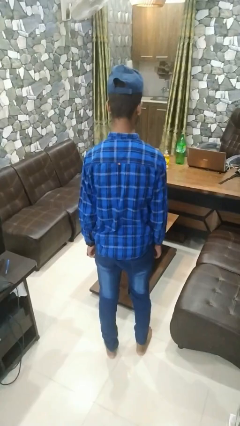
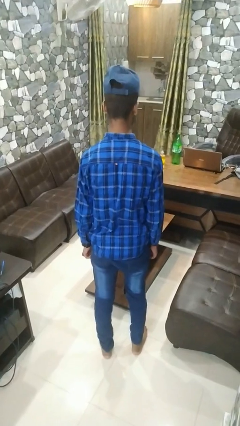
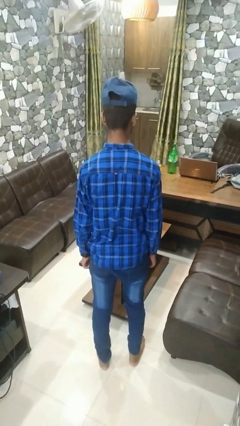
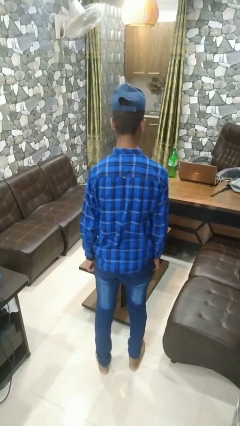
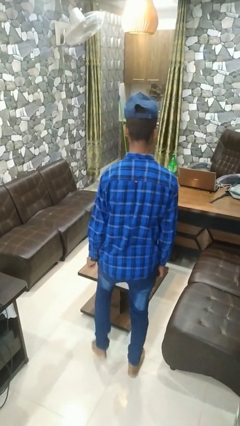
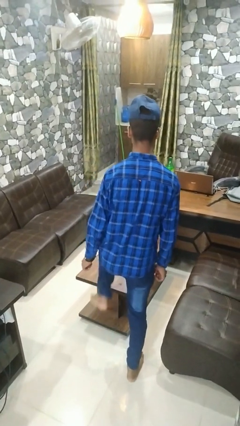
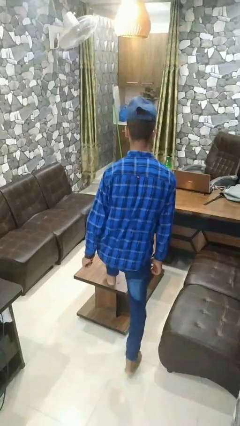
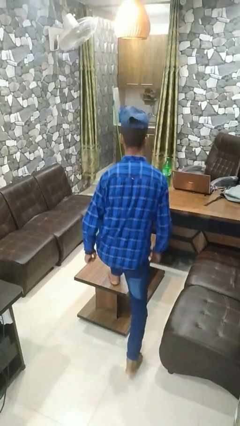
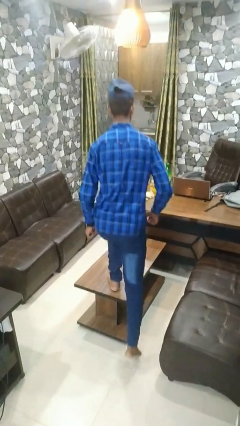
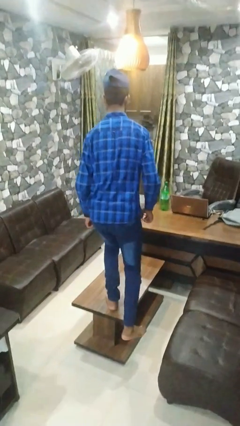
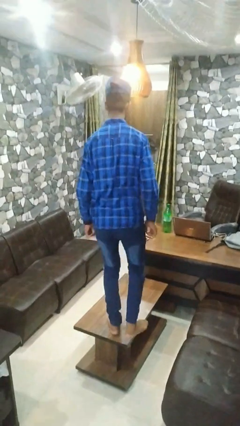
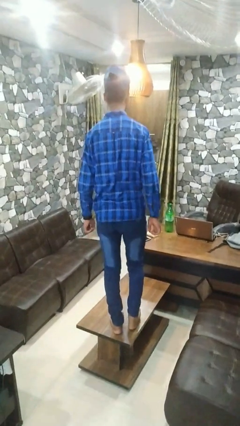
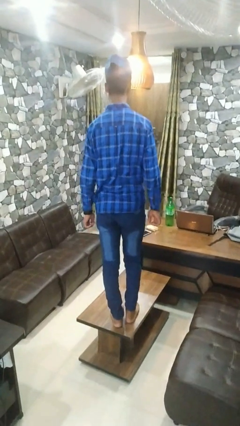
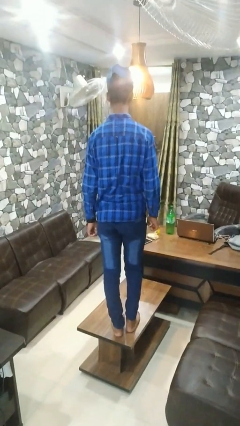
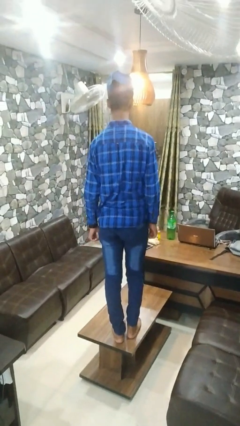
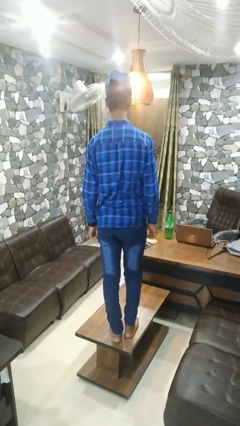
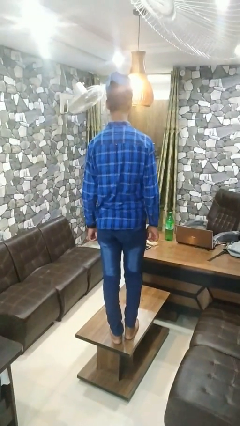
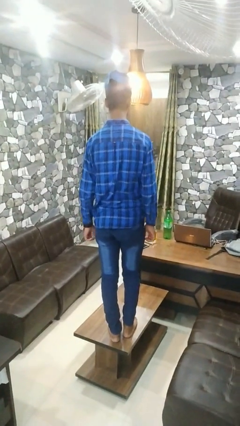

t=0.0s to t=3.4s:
person climbs on table

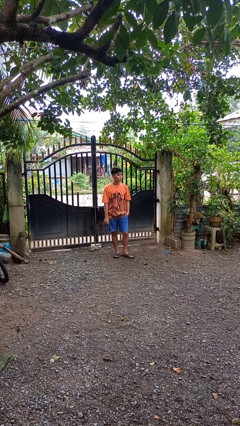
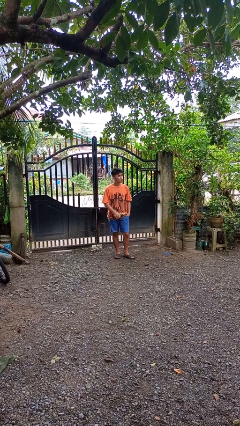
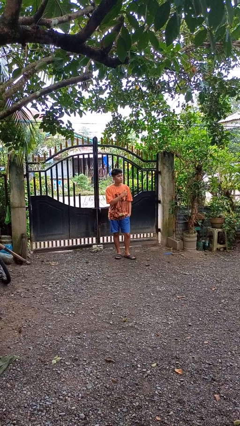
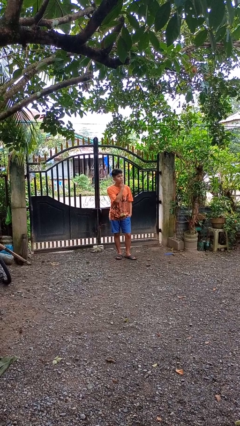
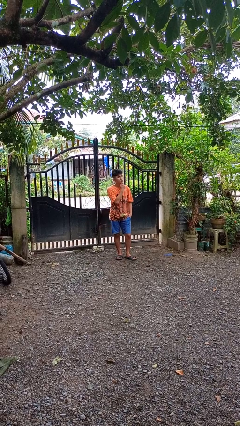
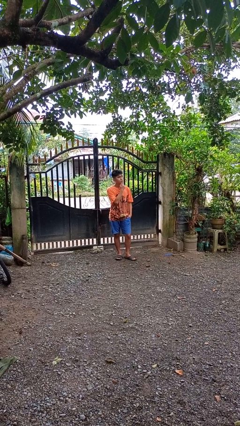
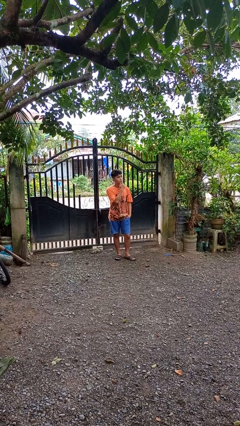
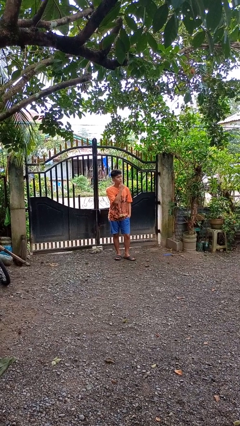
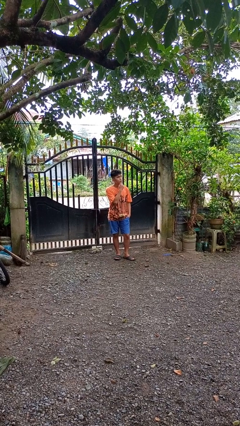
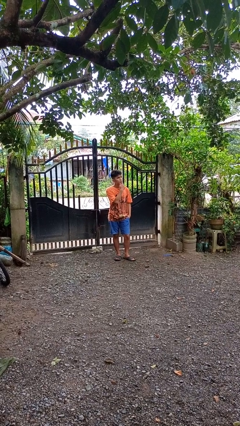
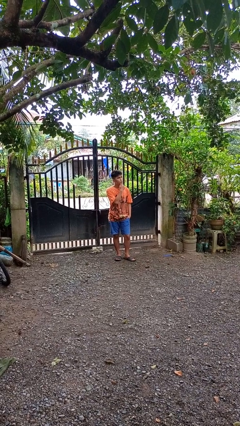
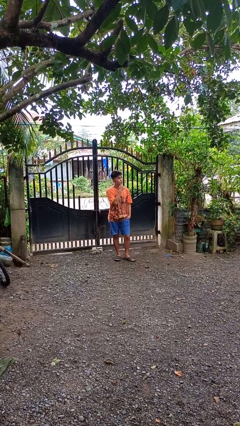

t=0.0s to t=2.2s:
person strokes chin

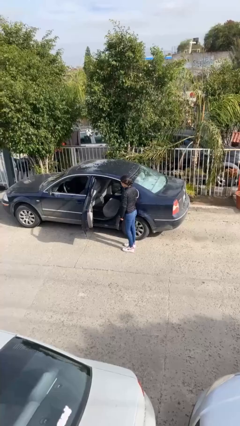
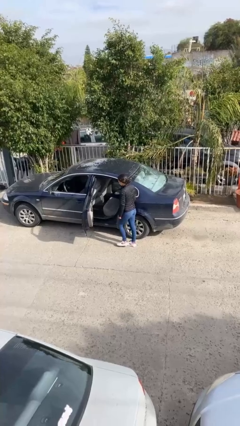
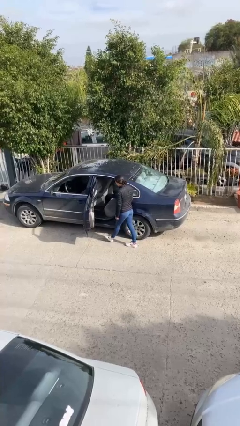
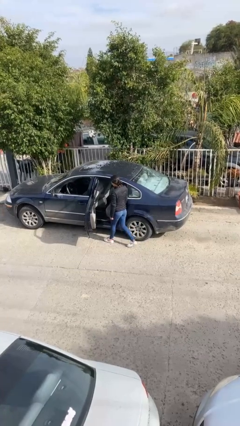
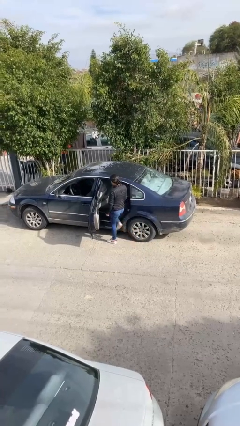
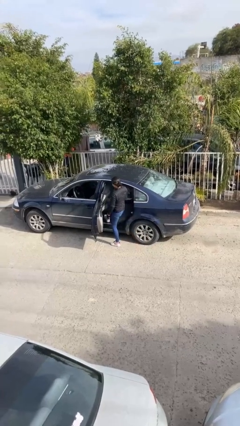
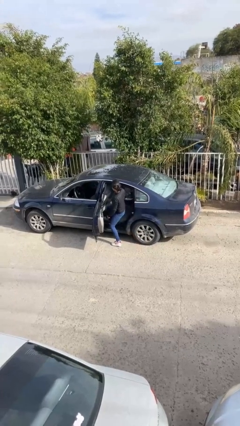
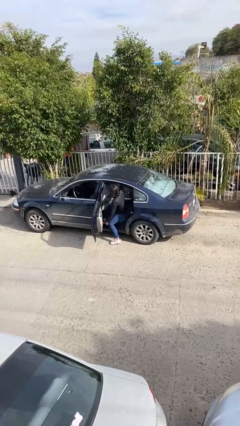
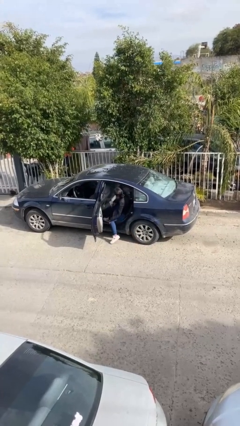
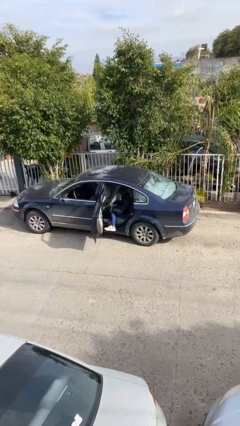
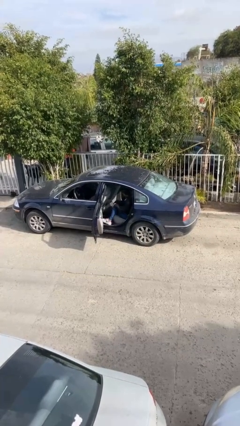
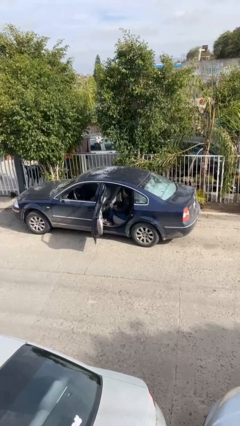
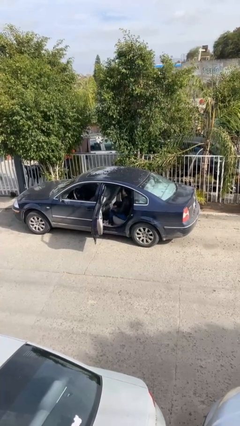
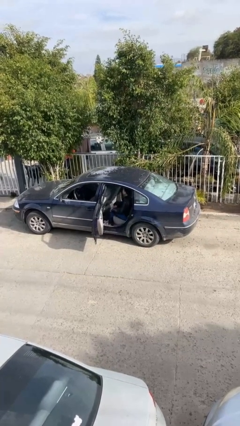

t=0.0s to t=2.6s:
person enters car

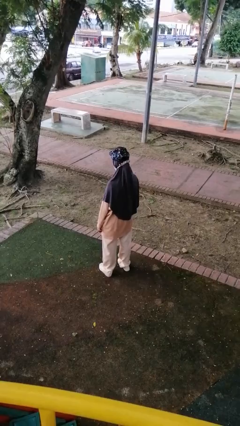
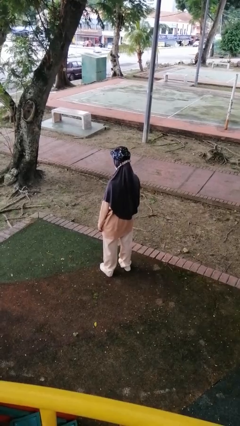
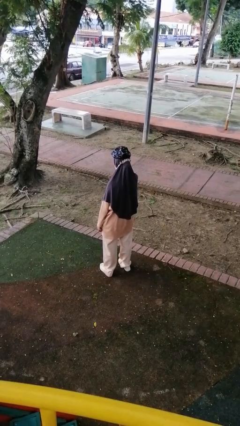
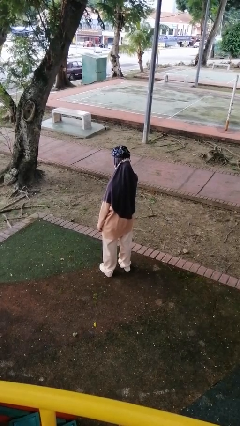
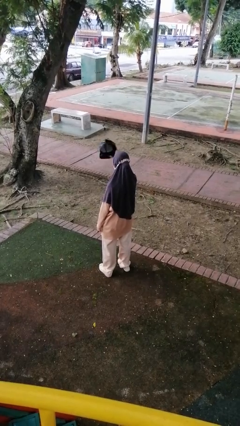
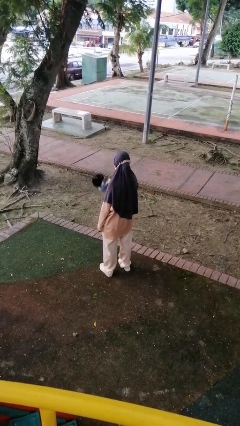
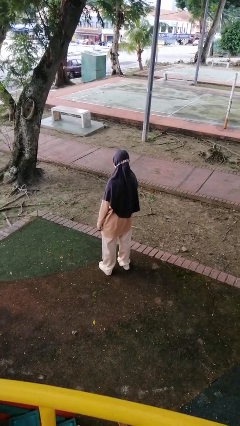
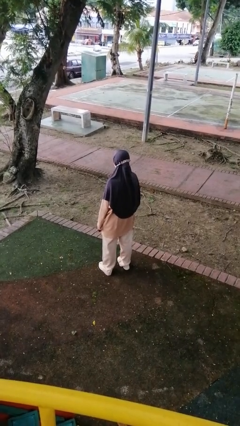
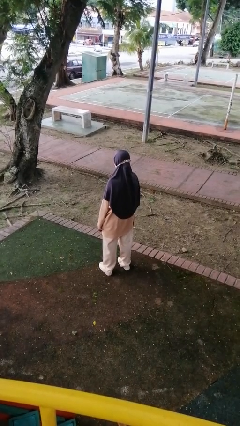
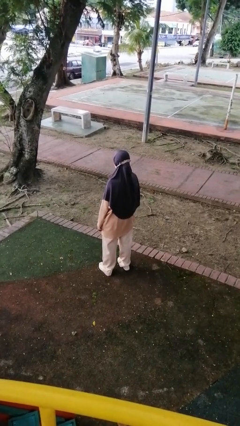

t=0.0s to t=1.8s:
person takes off hat

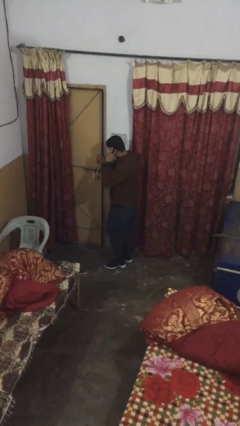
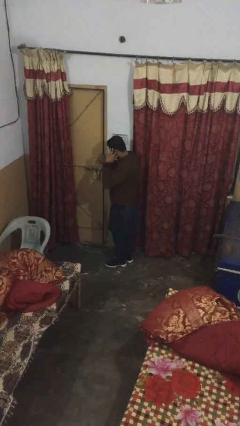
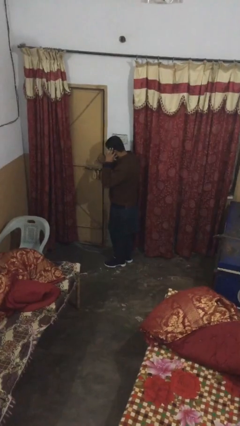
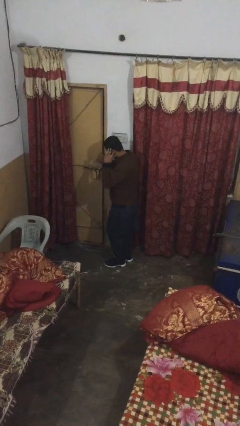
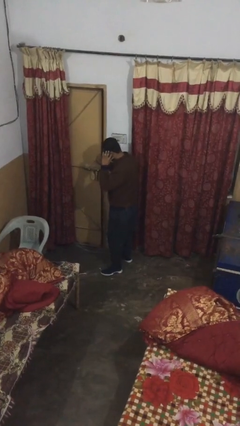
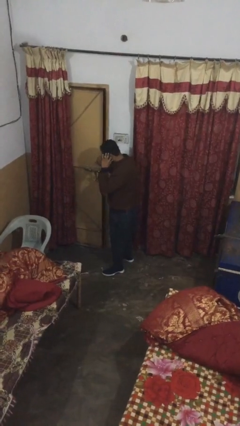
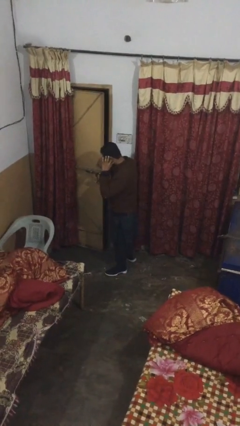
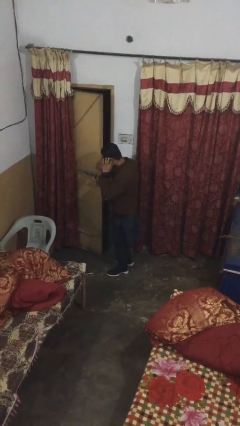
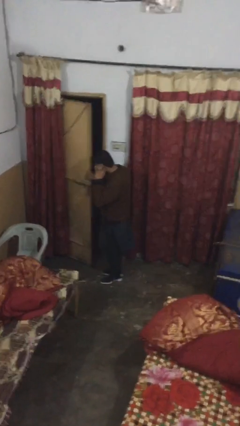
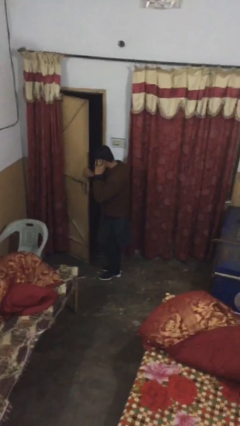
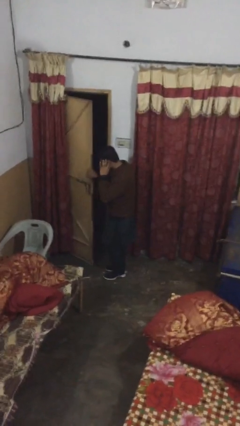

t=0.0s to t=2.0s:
person opens facility door

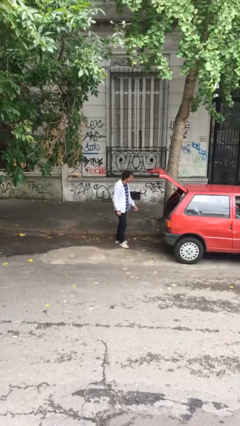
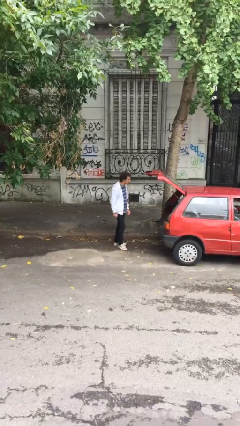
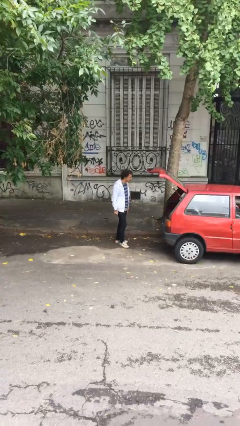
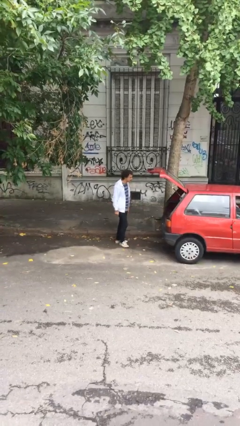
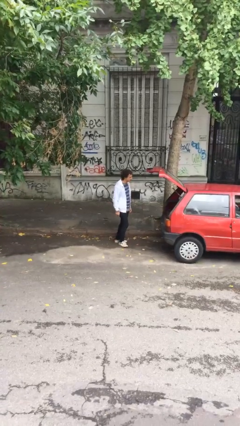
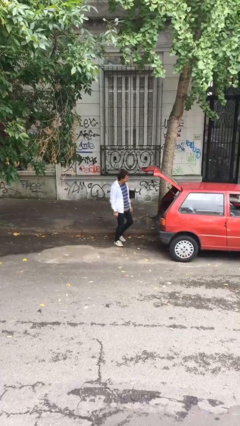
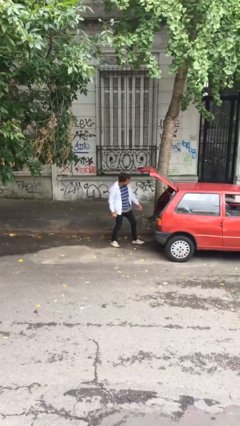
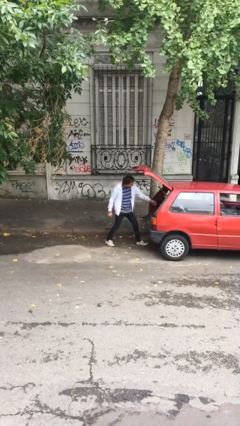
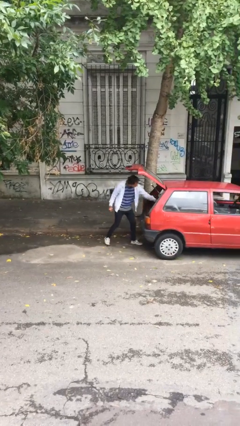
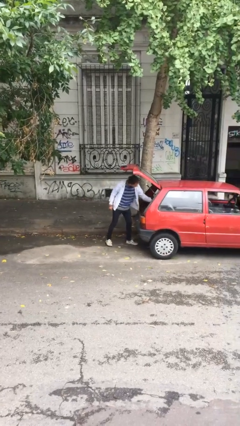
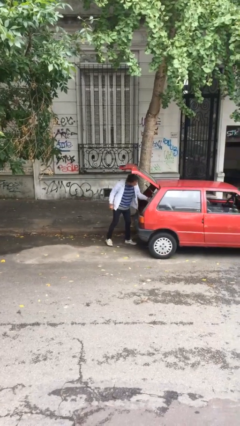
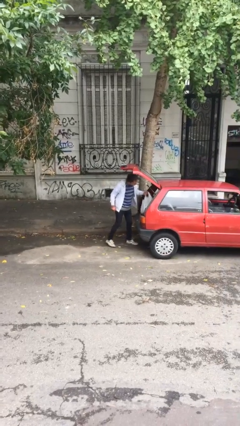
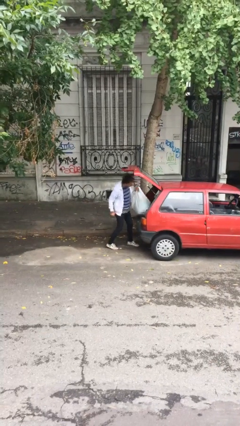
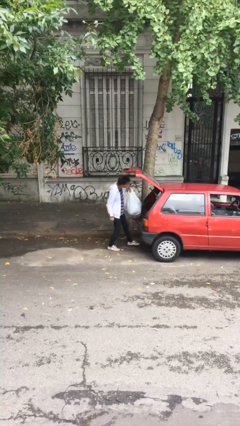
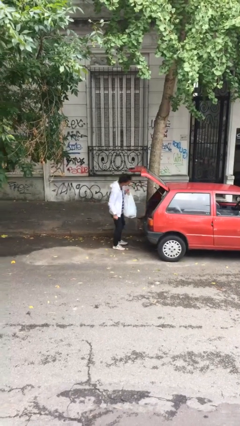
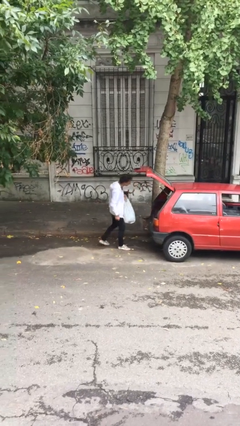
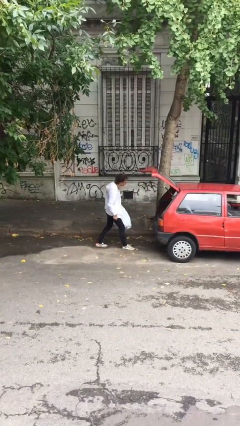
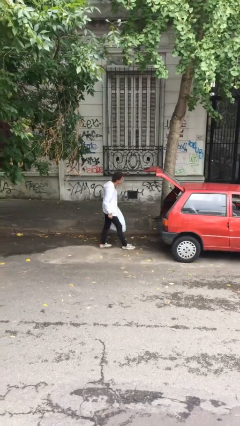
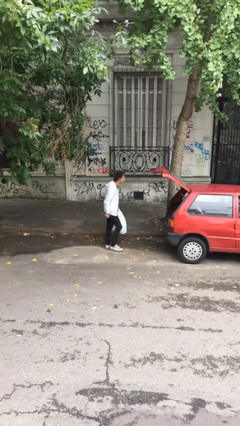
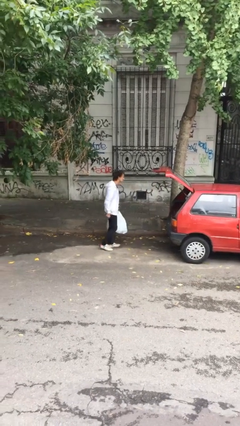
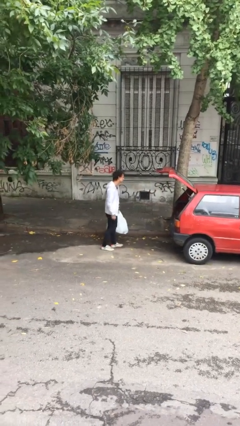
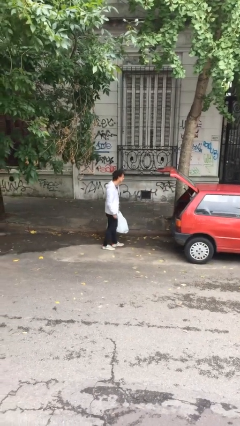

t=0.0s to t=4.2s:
person unloads car

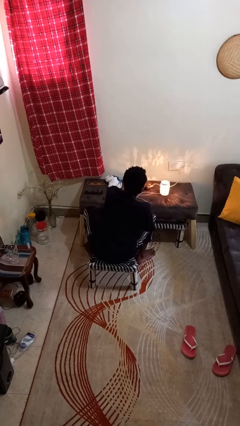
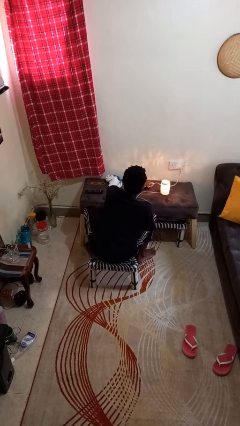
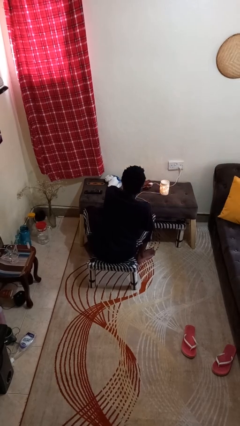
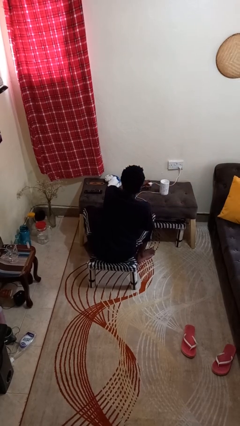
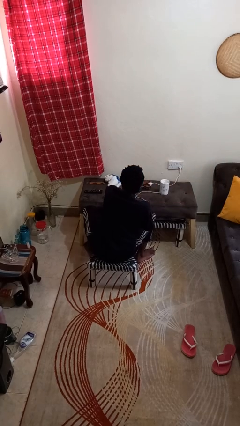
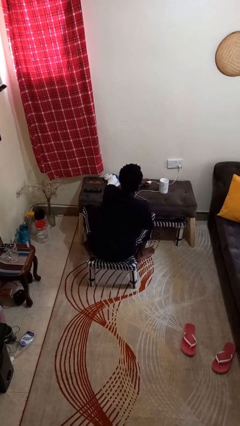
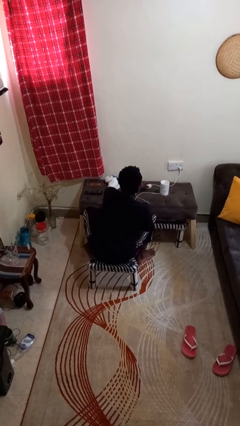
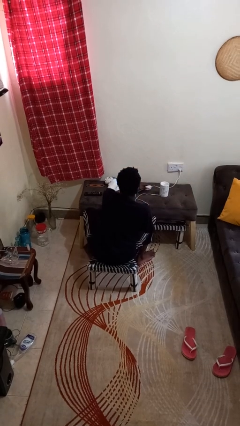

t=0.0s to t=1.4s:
person turns off fan
